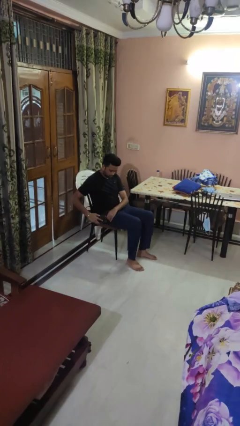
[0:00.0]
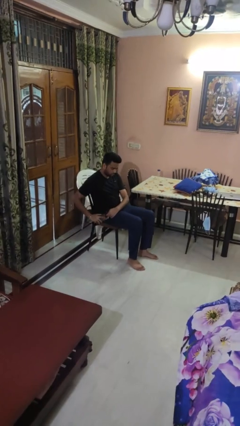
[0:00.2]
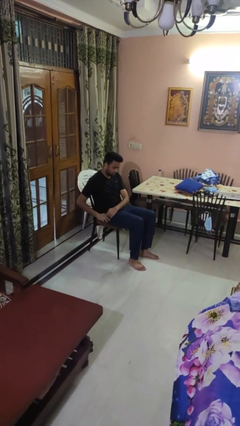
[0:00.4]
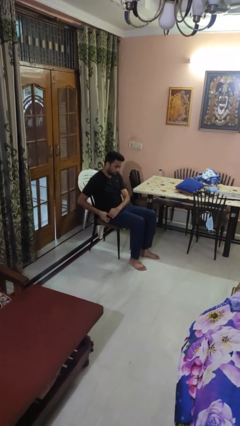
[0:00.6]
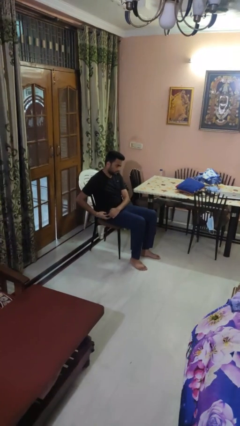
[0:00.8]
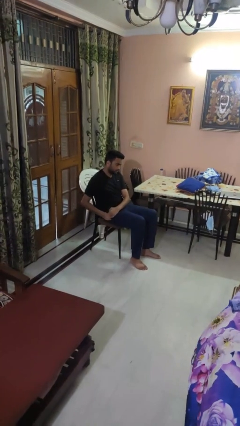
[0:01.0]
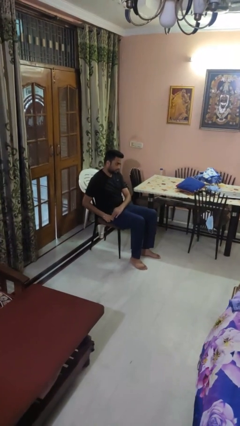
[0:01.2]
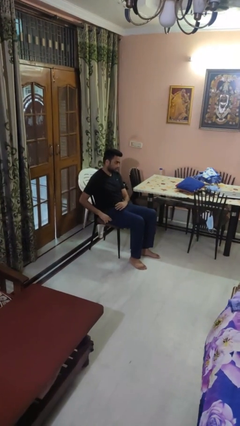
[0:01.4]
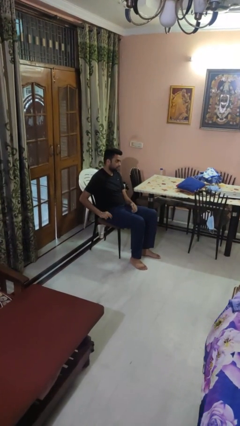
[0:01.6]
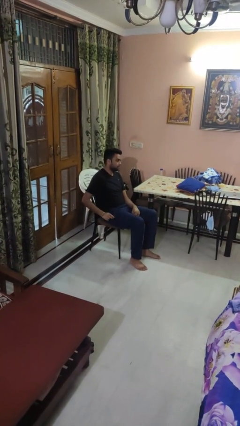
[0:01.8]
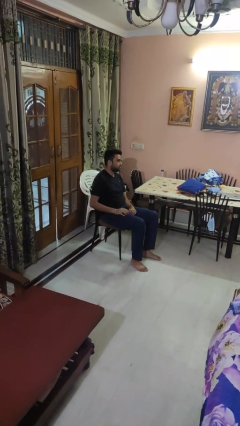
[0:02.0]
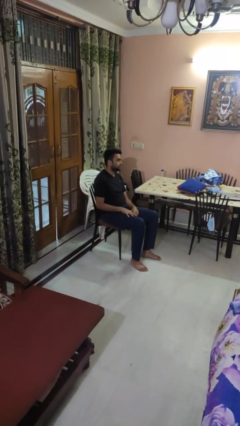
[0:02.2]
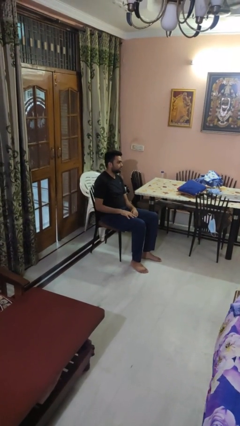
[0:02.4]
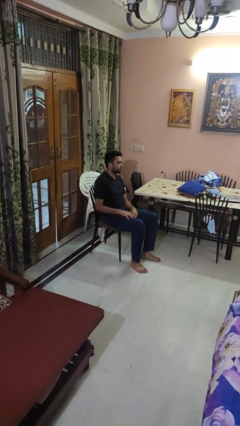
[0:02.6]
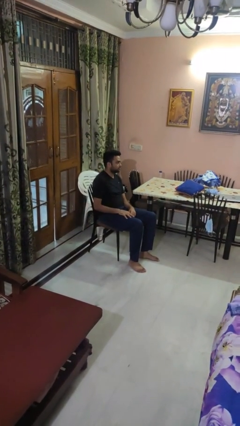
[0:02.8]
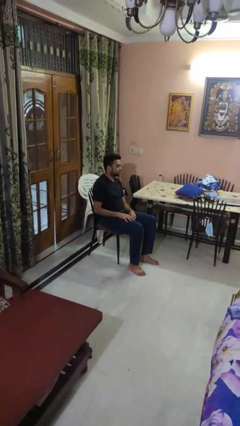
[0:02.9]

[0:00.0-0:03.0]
person puts phone into pocket

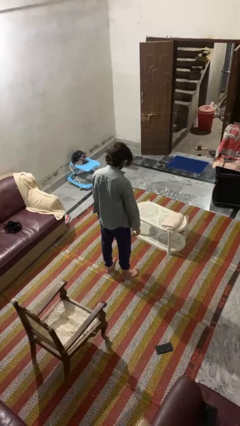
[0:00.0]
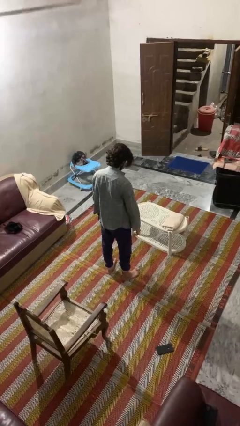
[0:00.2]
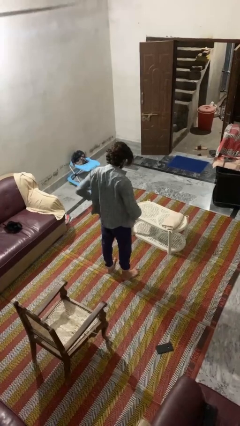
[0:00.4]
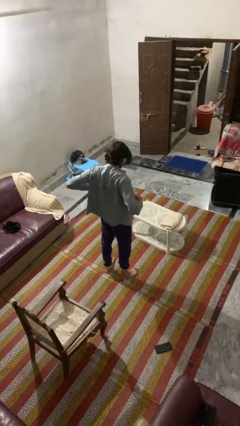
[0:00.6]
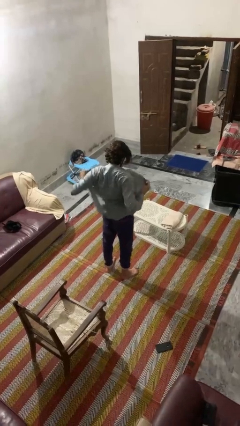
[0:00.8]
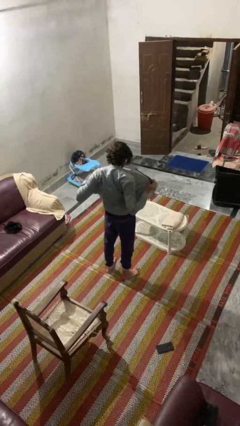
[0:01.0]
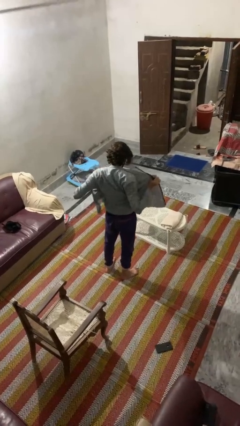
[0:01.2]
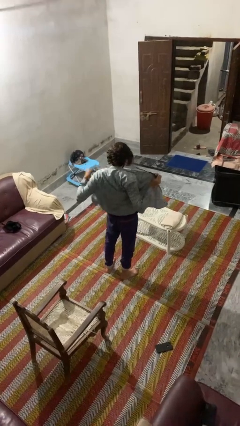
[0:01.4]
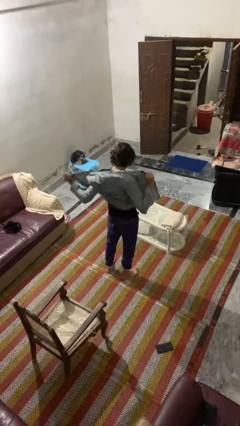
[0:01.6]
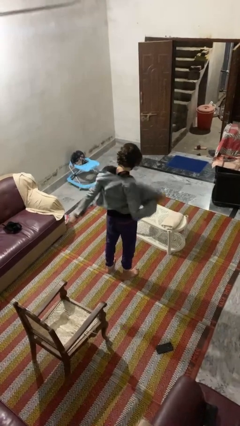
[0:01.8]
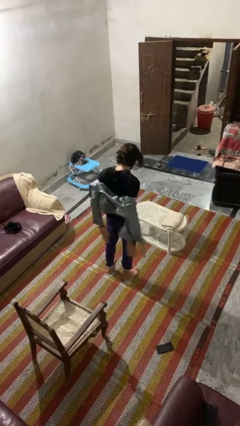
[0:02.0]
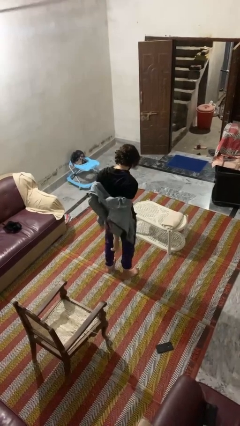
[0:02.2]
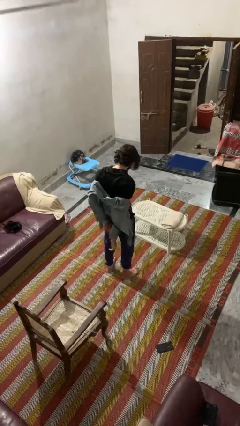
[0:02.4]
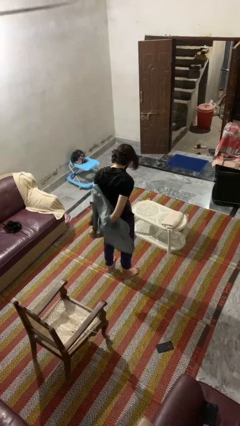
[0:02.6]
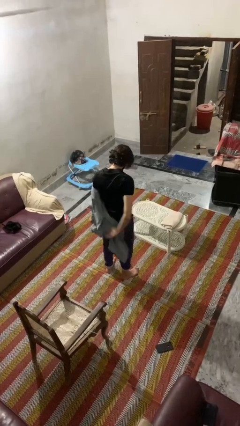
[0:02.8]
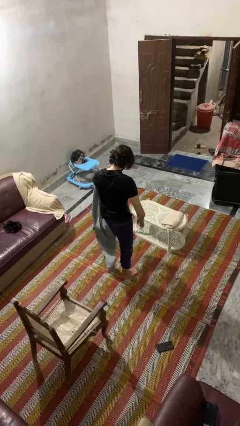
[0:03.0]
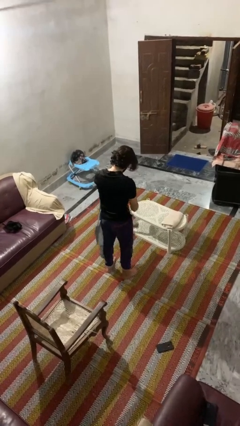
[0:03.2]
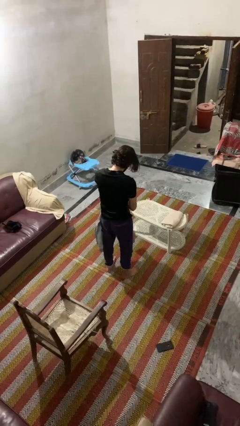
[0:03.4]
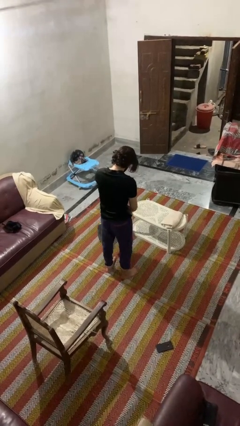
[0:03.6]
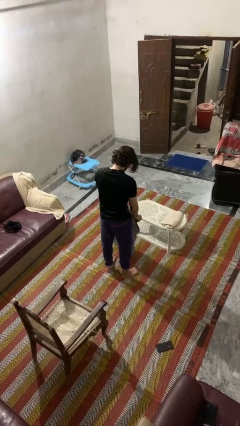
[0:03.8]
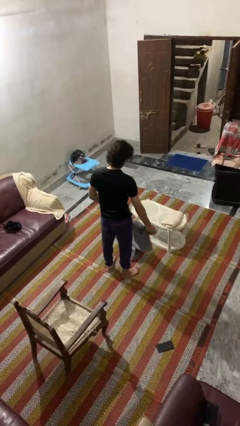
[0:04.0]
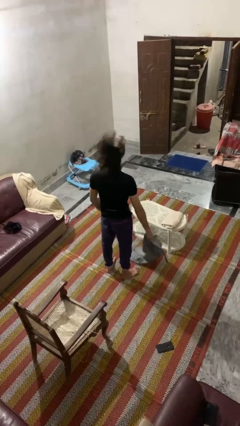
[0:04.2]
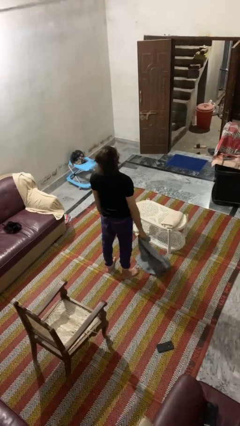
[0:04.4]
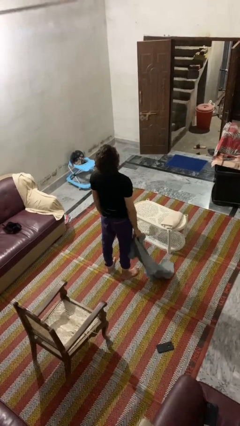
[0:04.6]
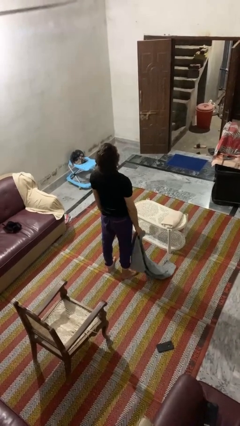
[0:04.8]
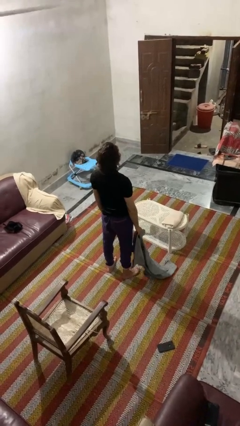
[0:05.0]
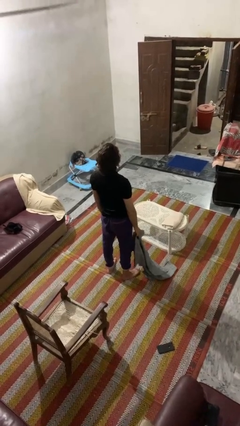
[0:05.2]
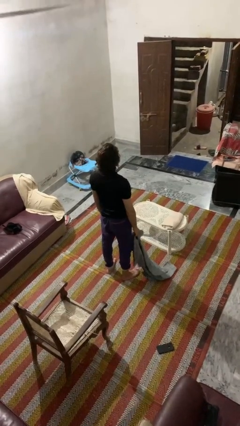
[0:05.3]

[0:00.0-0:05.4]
person takes off shirt

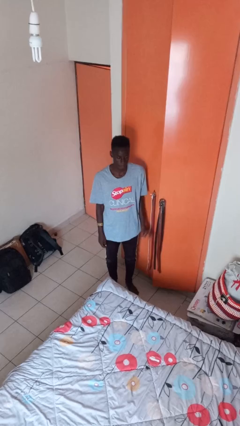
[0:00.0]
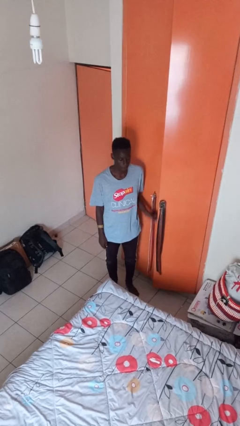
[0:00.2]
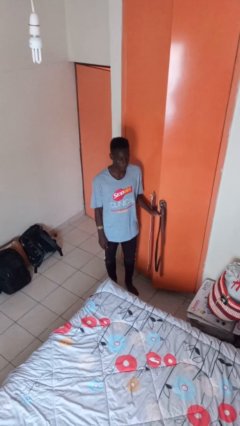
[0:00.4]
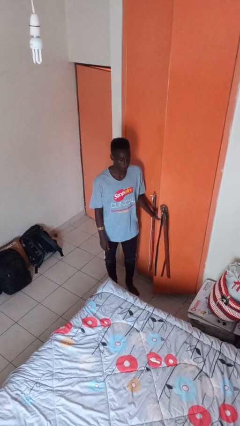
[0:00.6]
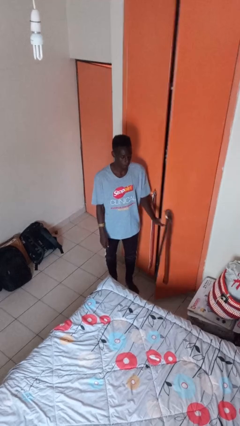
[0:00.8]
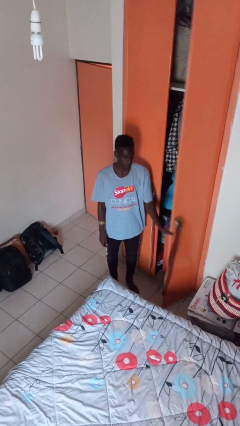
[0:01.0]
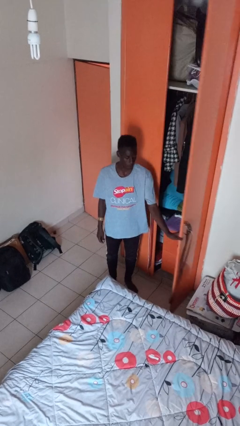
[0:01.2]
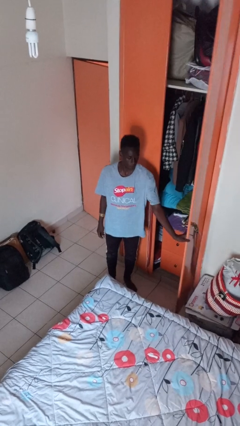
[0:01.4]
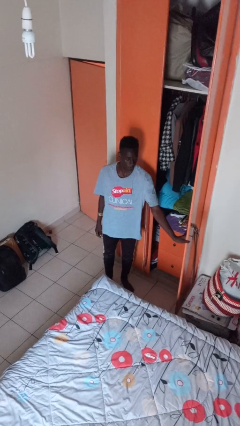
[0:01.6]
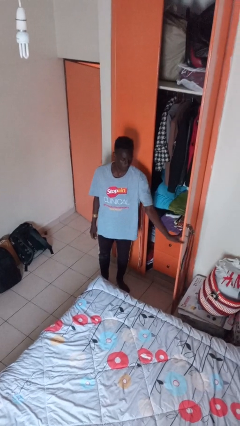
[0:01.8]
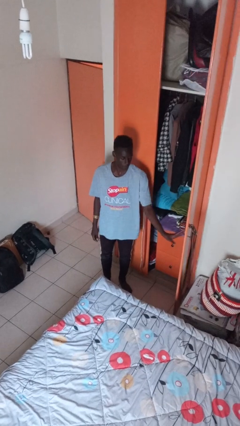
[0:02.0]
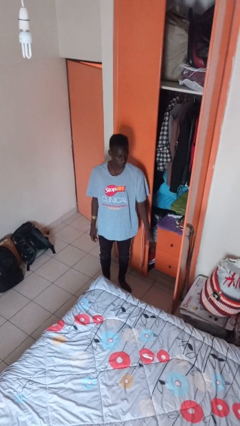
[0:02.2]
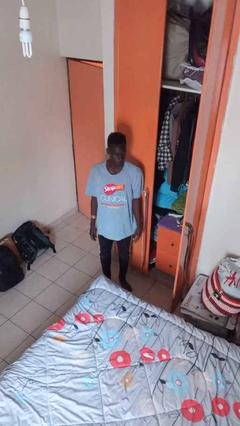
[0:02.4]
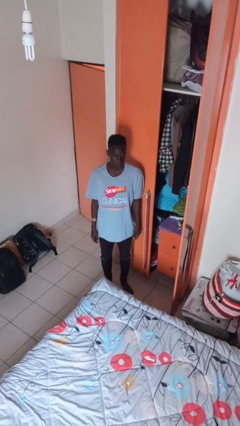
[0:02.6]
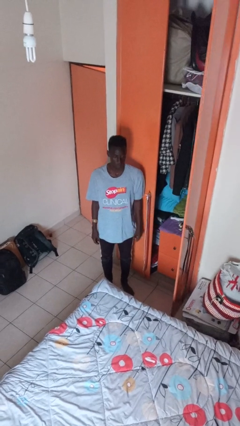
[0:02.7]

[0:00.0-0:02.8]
person opens closet door

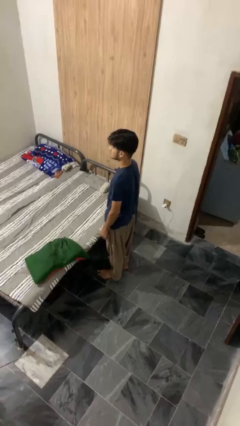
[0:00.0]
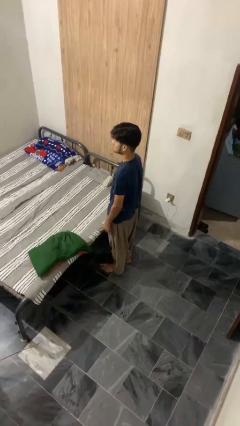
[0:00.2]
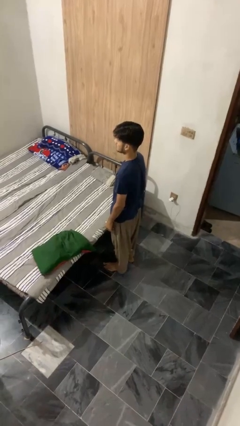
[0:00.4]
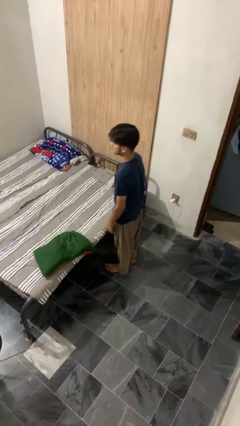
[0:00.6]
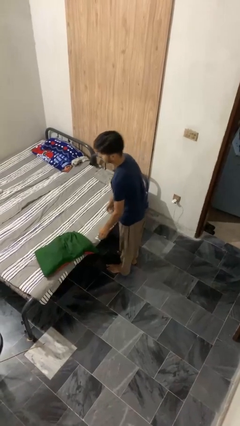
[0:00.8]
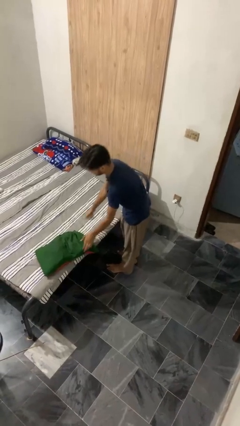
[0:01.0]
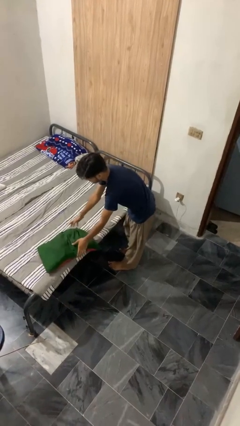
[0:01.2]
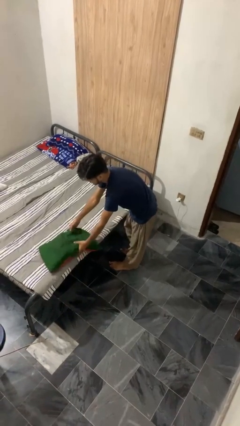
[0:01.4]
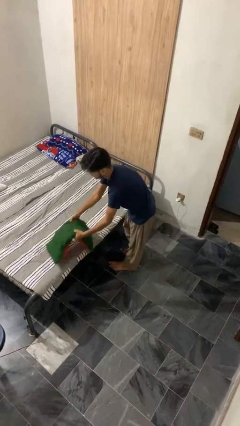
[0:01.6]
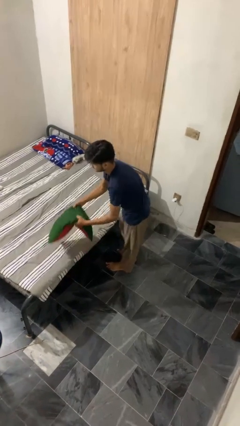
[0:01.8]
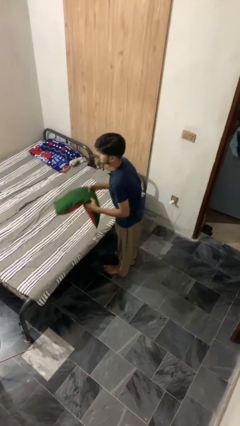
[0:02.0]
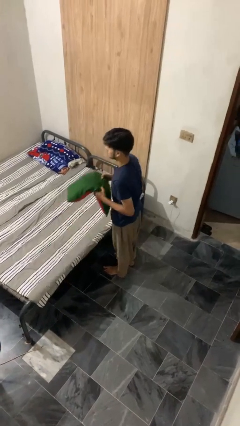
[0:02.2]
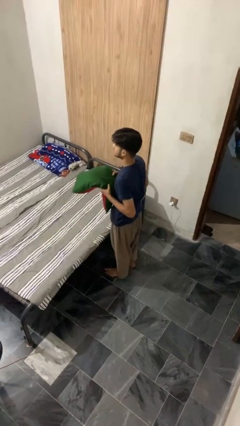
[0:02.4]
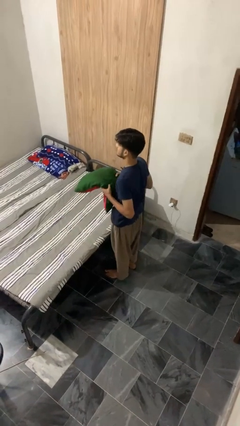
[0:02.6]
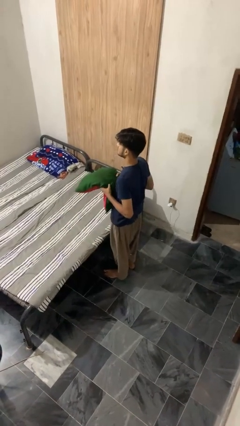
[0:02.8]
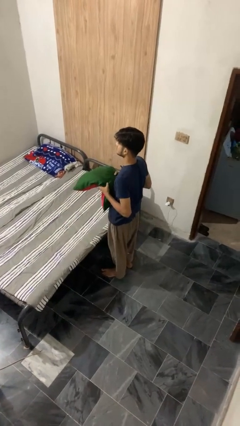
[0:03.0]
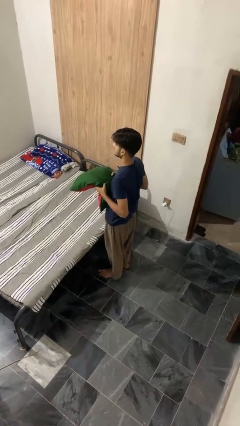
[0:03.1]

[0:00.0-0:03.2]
person picks up object from bed

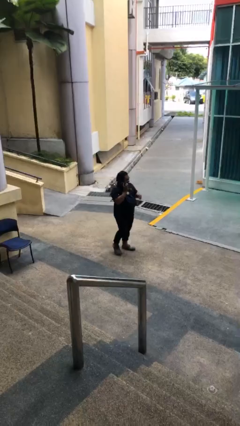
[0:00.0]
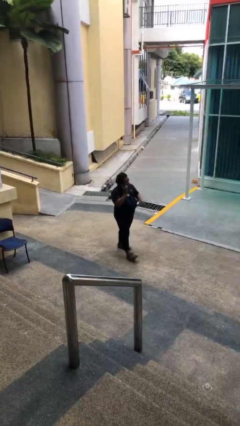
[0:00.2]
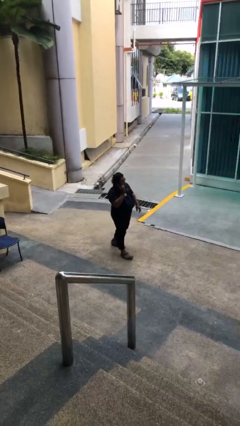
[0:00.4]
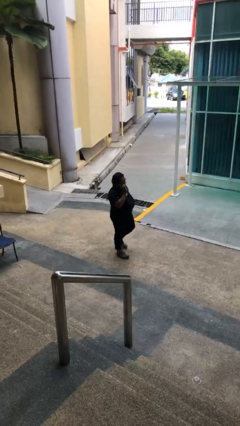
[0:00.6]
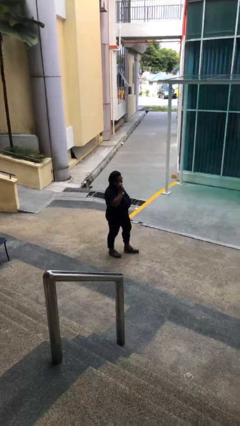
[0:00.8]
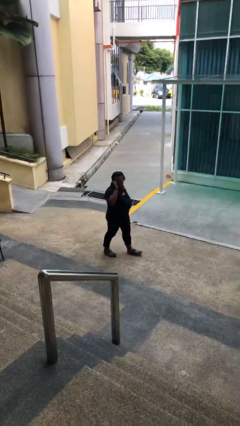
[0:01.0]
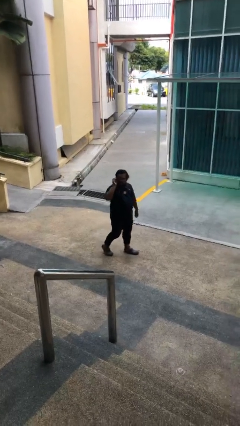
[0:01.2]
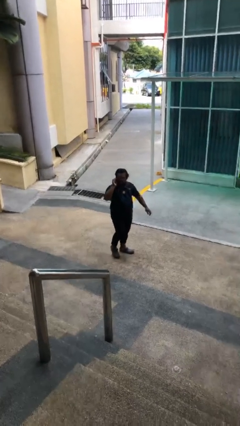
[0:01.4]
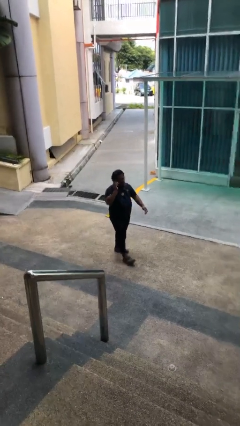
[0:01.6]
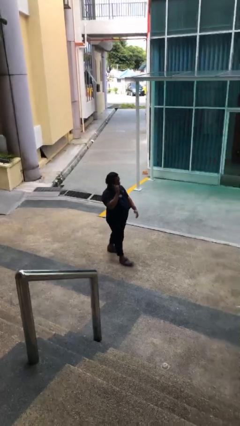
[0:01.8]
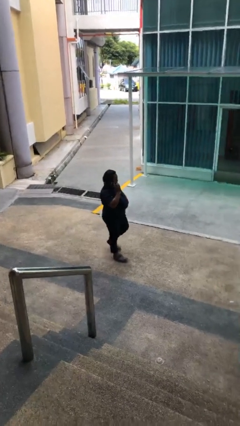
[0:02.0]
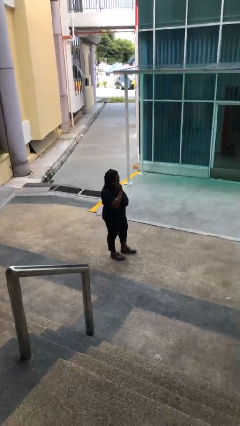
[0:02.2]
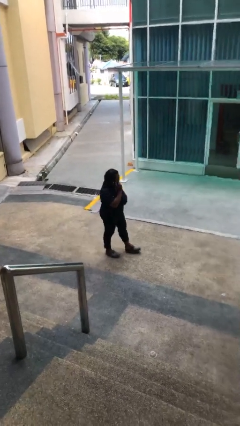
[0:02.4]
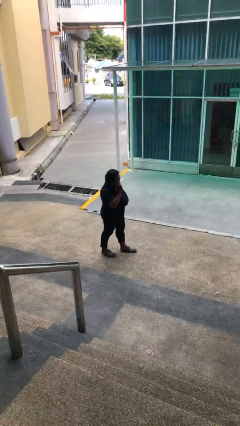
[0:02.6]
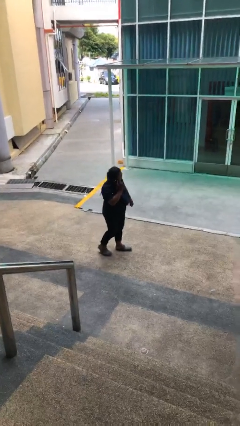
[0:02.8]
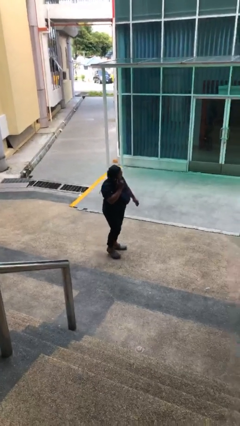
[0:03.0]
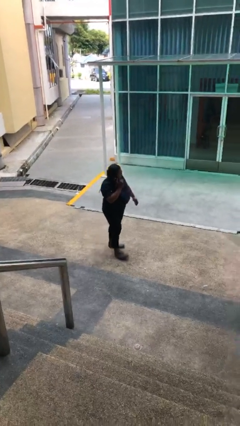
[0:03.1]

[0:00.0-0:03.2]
person talks on phone
